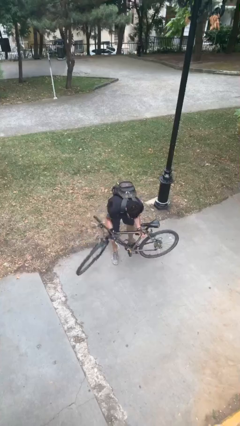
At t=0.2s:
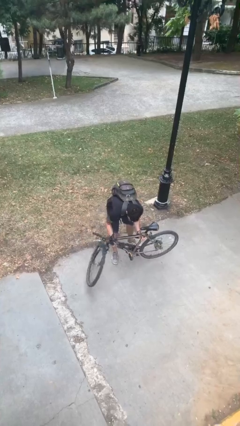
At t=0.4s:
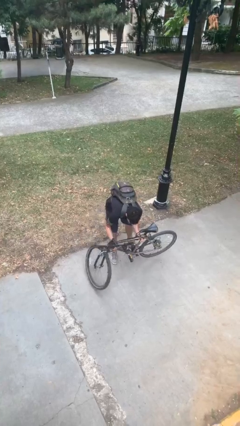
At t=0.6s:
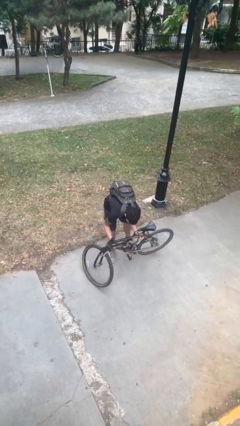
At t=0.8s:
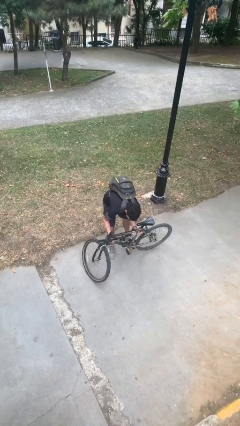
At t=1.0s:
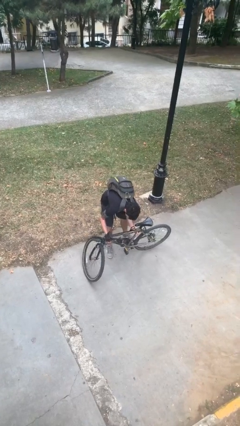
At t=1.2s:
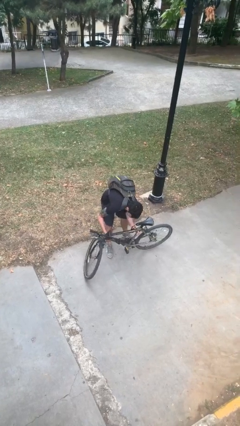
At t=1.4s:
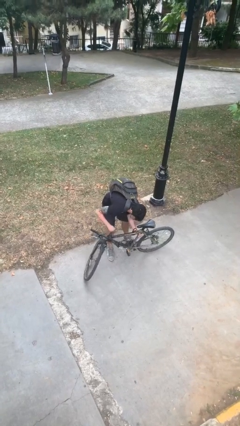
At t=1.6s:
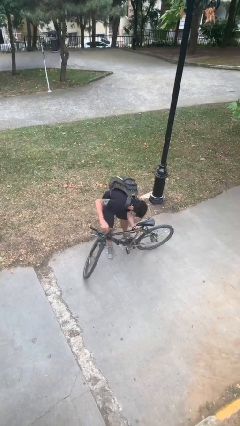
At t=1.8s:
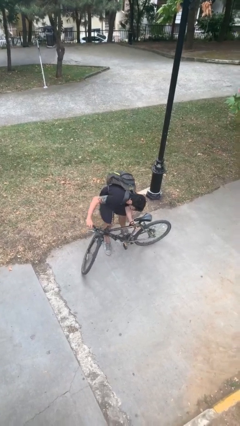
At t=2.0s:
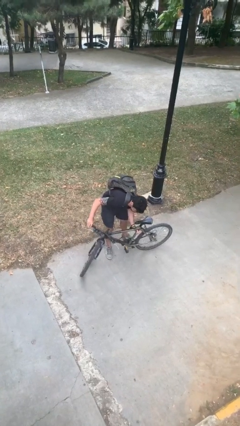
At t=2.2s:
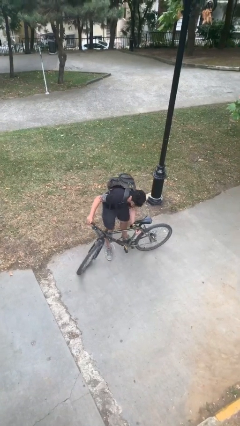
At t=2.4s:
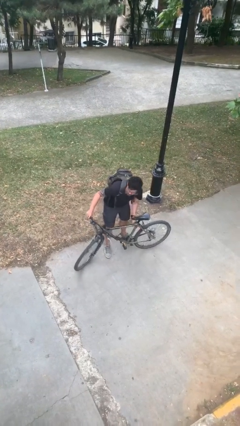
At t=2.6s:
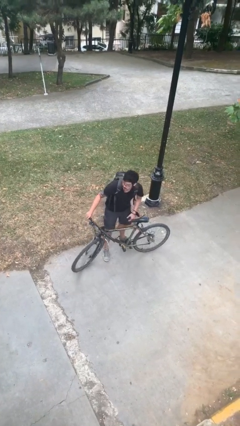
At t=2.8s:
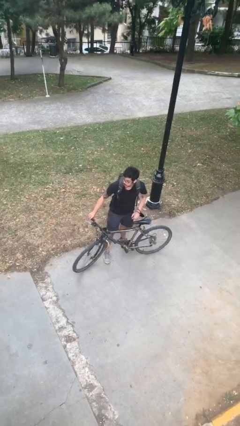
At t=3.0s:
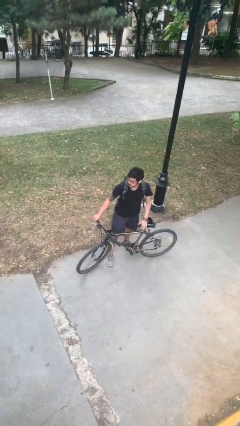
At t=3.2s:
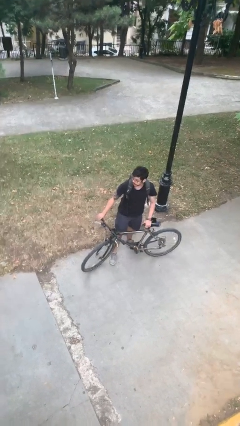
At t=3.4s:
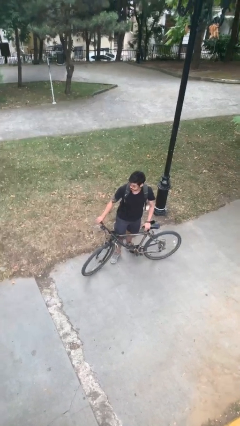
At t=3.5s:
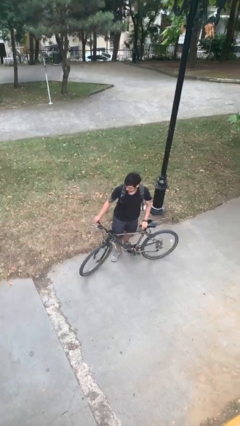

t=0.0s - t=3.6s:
person puts down object on floor

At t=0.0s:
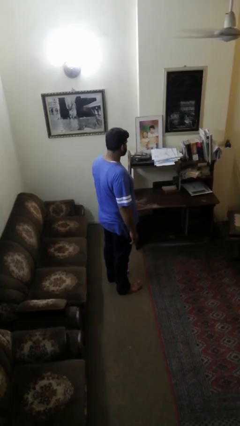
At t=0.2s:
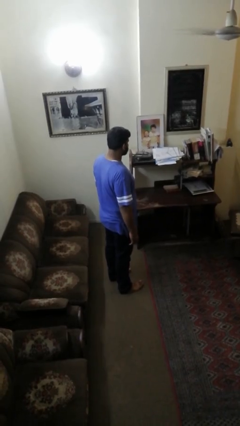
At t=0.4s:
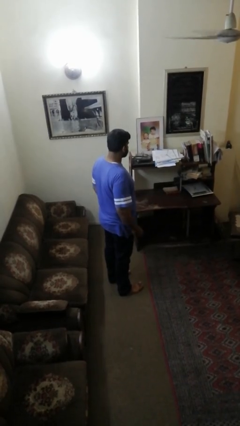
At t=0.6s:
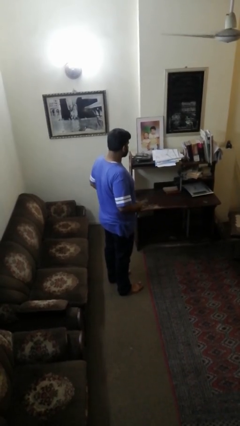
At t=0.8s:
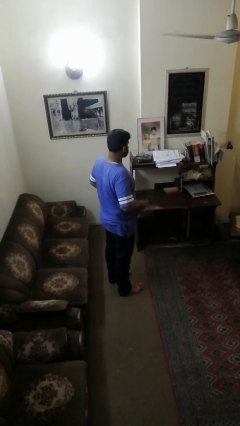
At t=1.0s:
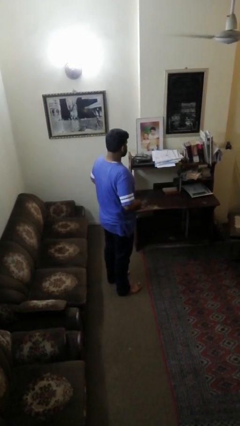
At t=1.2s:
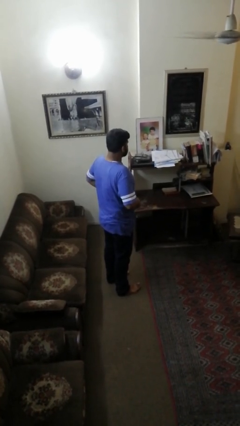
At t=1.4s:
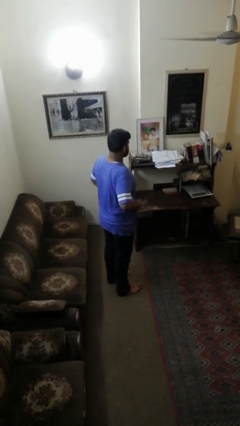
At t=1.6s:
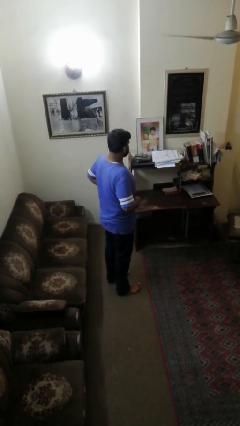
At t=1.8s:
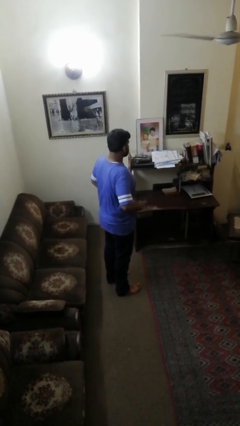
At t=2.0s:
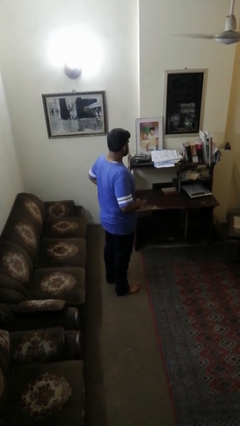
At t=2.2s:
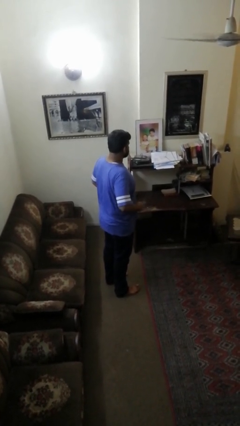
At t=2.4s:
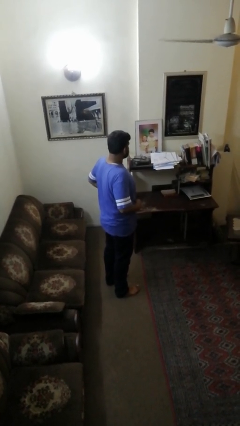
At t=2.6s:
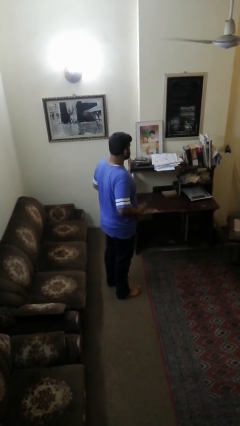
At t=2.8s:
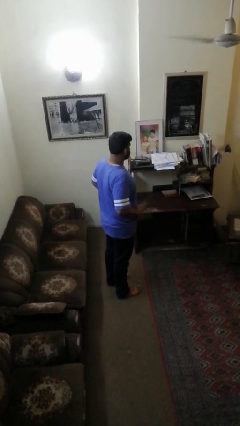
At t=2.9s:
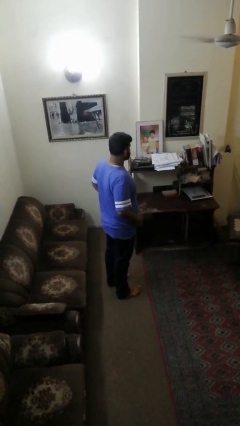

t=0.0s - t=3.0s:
person hikes up pants

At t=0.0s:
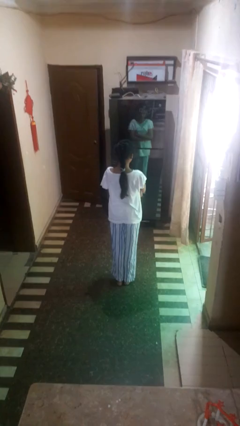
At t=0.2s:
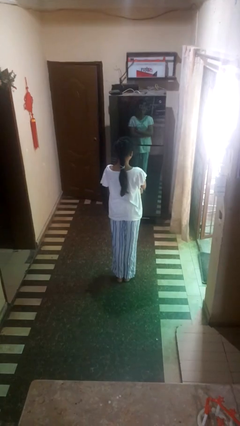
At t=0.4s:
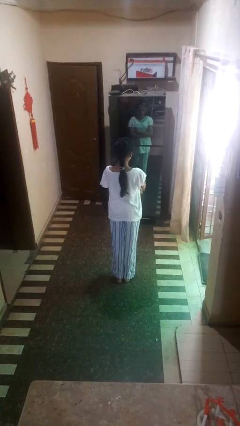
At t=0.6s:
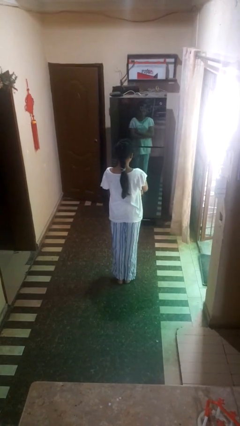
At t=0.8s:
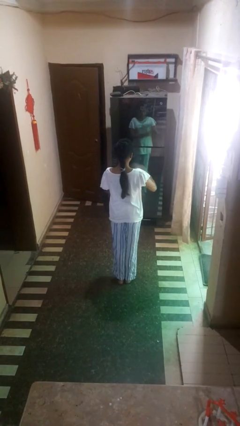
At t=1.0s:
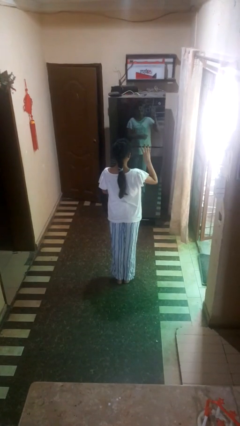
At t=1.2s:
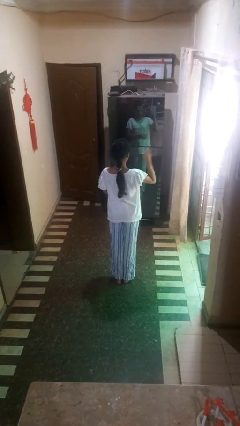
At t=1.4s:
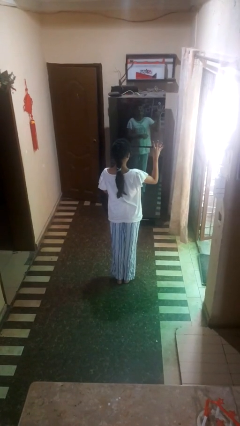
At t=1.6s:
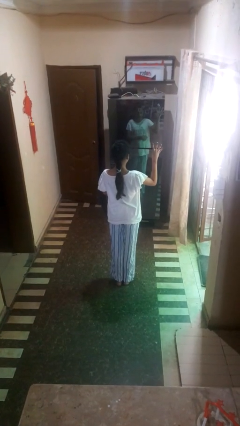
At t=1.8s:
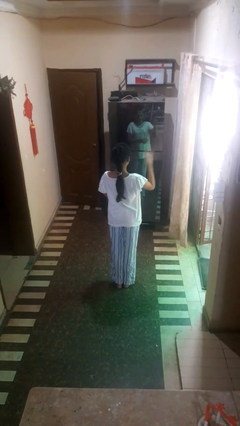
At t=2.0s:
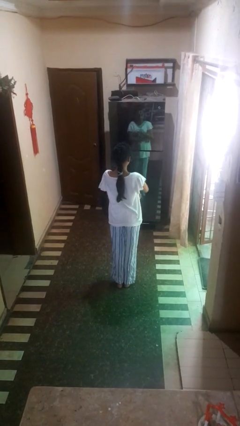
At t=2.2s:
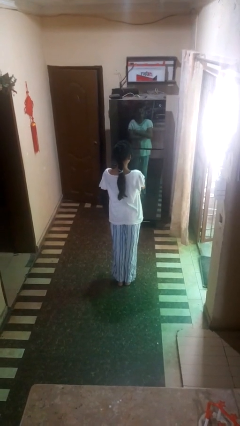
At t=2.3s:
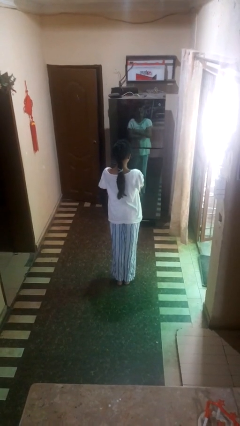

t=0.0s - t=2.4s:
person gestures number four

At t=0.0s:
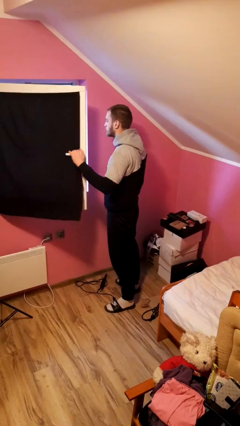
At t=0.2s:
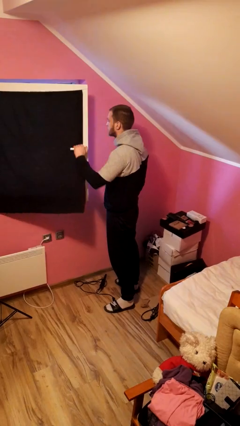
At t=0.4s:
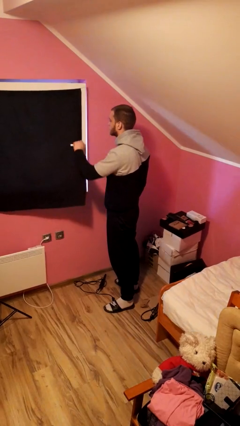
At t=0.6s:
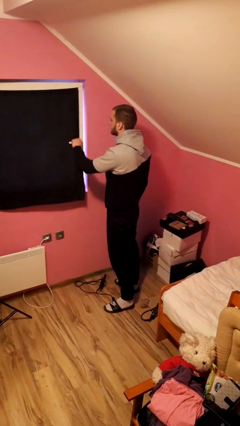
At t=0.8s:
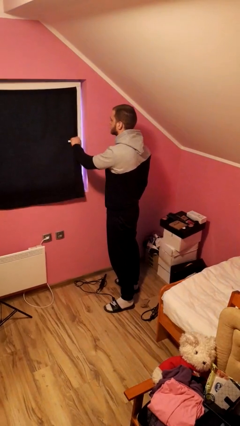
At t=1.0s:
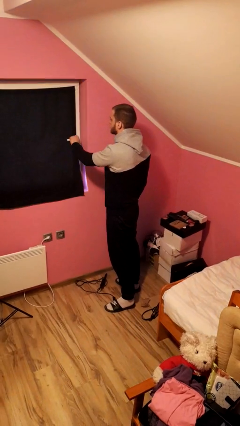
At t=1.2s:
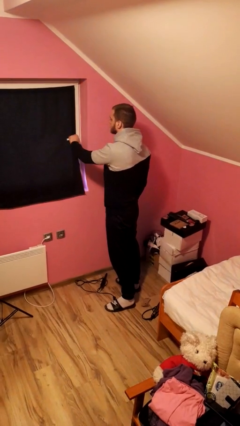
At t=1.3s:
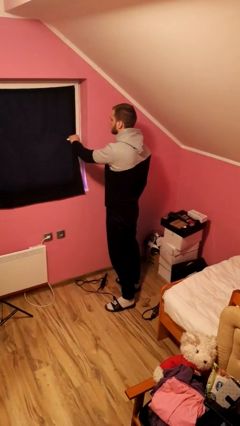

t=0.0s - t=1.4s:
person closes home window

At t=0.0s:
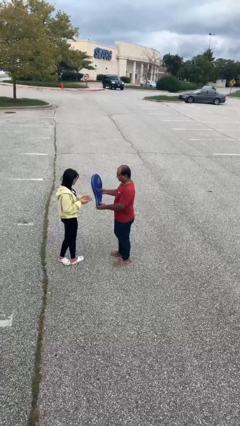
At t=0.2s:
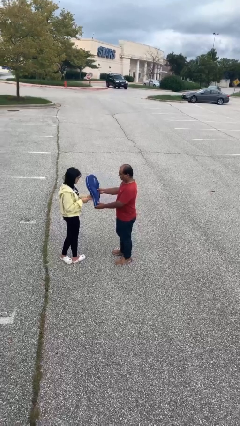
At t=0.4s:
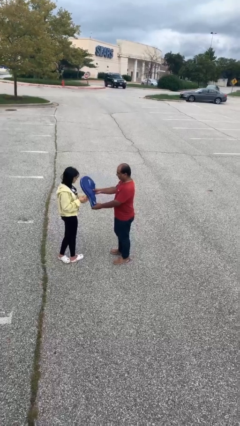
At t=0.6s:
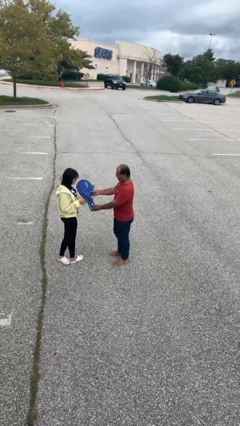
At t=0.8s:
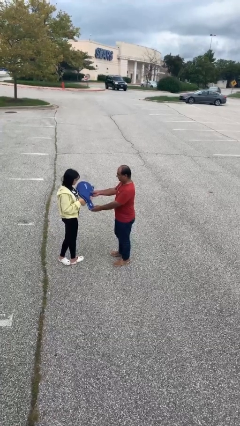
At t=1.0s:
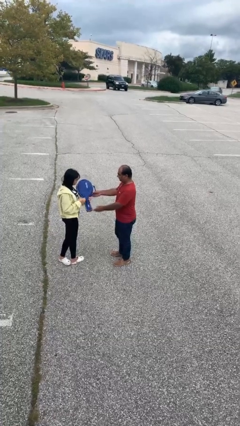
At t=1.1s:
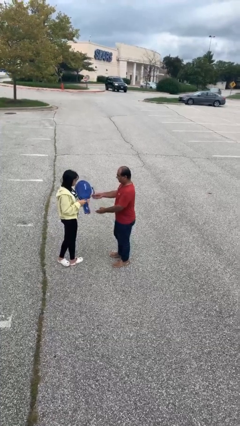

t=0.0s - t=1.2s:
person transfers object to person

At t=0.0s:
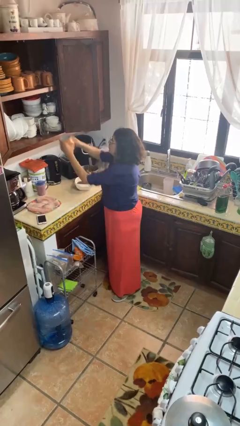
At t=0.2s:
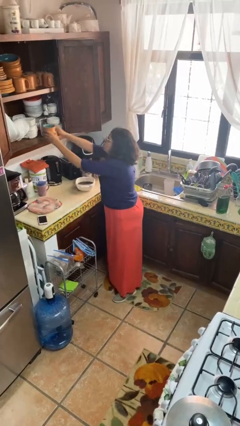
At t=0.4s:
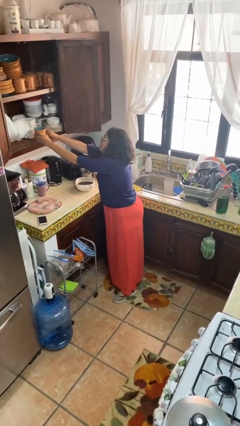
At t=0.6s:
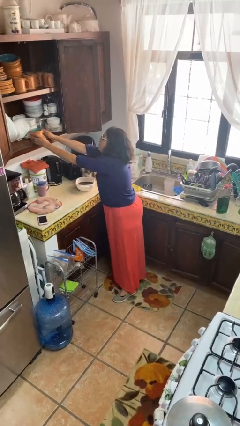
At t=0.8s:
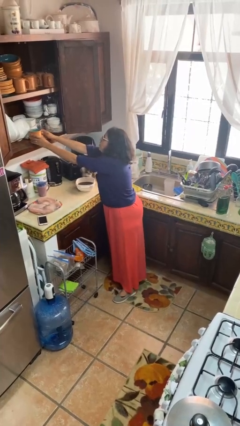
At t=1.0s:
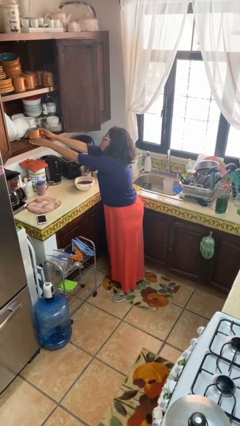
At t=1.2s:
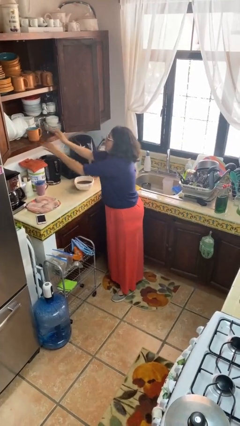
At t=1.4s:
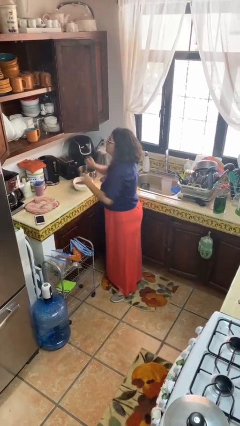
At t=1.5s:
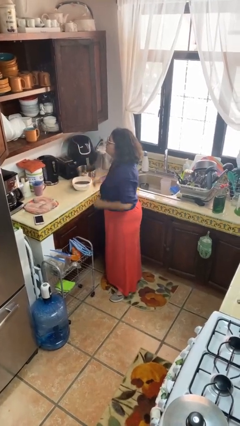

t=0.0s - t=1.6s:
person puts down object into cabinet

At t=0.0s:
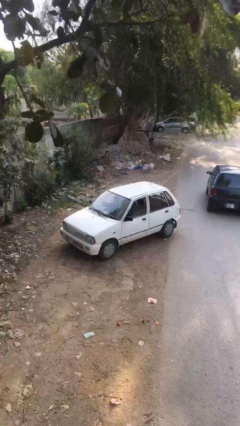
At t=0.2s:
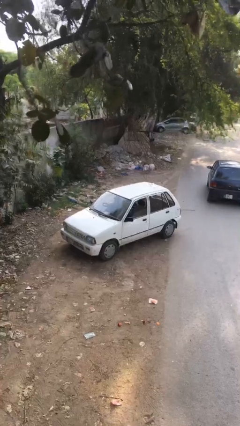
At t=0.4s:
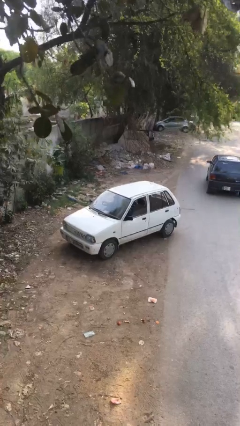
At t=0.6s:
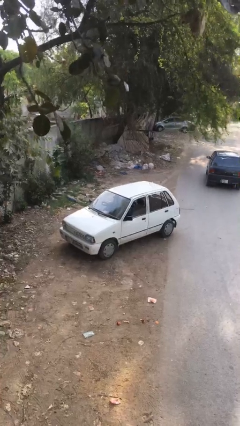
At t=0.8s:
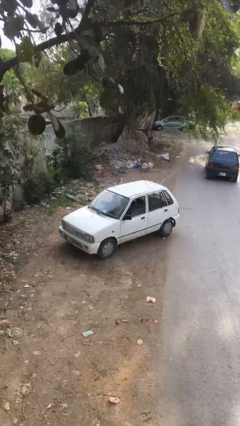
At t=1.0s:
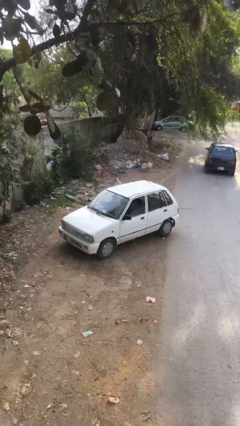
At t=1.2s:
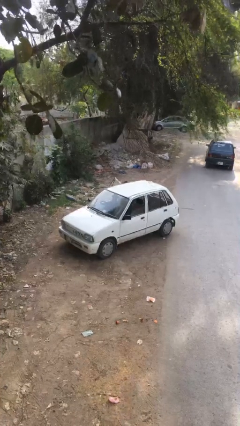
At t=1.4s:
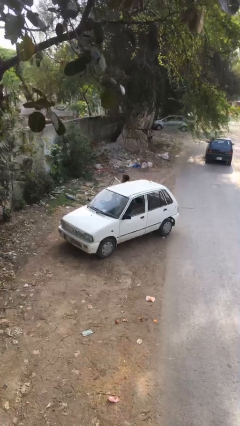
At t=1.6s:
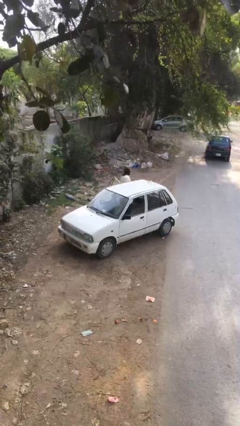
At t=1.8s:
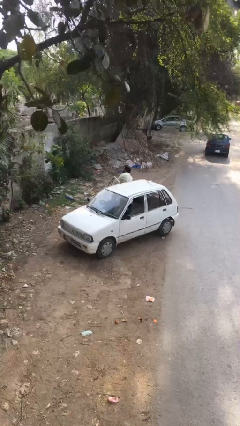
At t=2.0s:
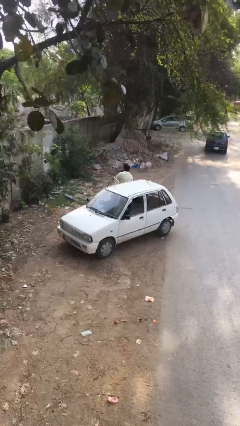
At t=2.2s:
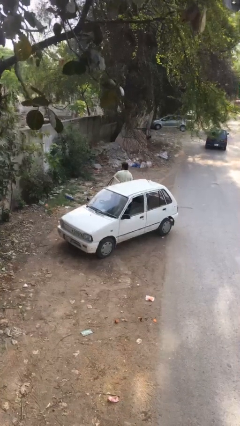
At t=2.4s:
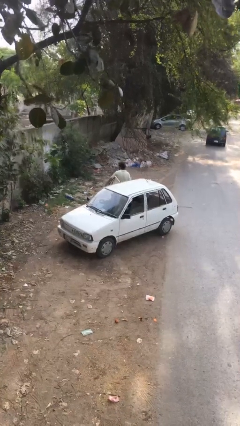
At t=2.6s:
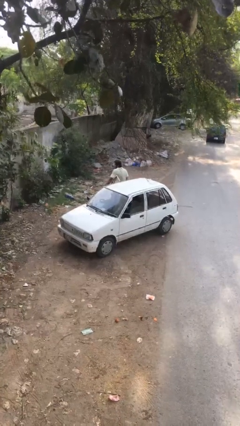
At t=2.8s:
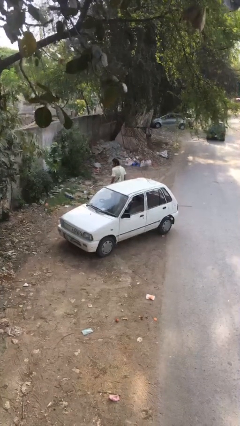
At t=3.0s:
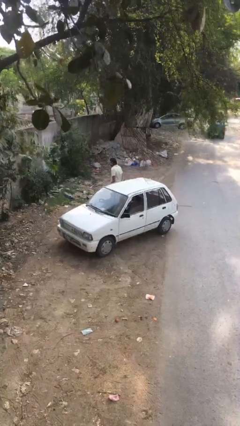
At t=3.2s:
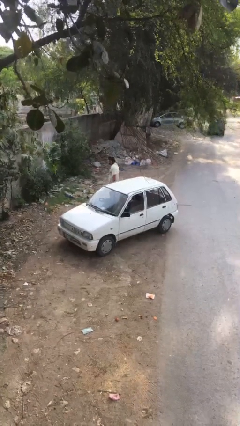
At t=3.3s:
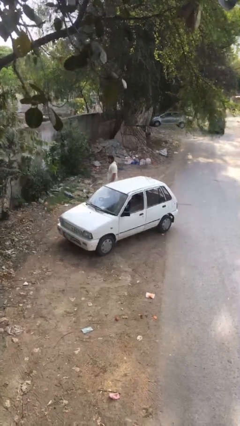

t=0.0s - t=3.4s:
car drops off person
